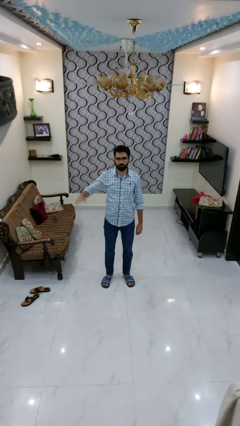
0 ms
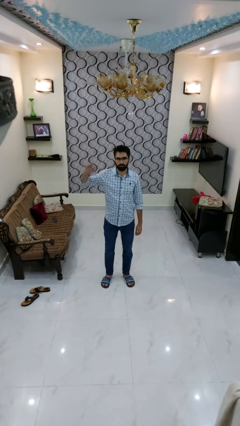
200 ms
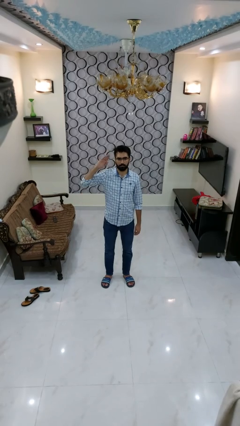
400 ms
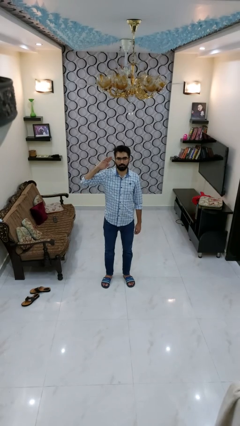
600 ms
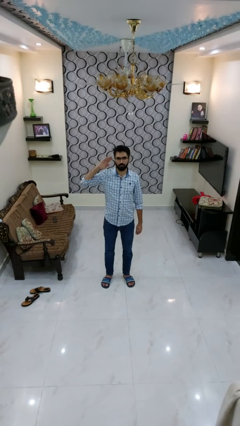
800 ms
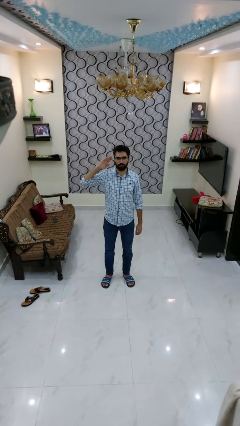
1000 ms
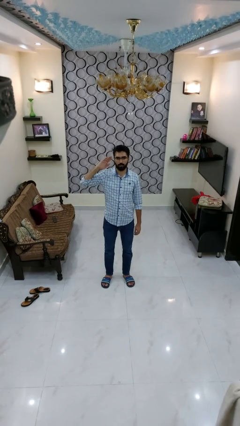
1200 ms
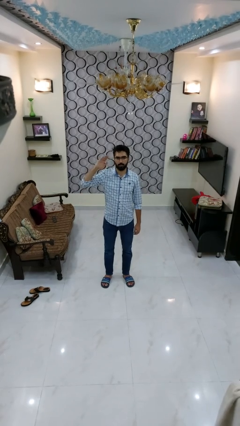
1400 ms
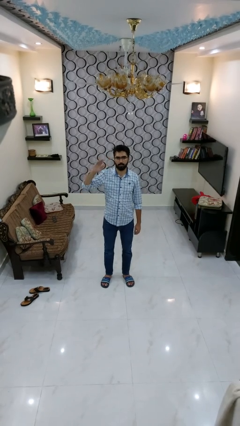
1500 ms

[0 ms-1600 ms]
person salutes

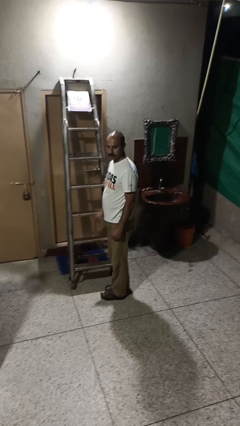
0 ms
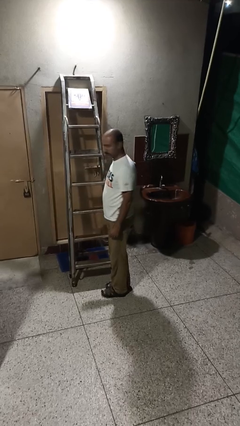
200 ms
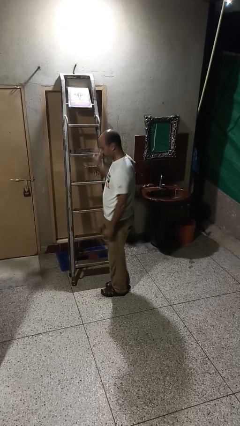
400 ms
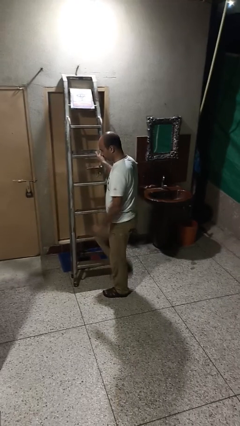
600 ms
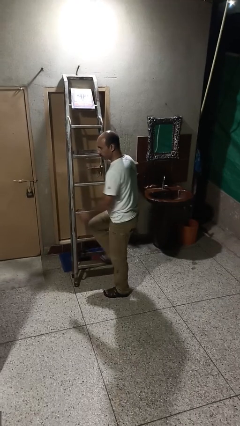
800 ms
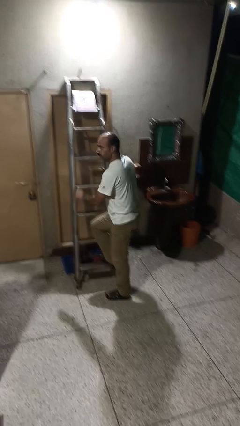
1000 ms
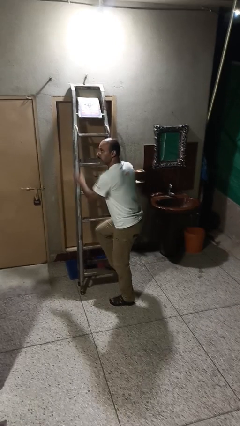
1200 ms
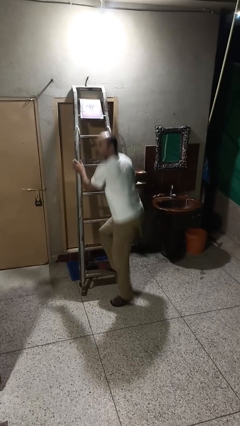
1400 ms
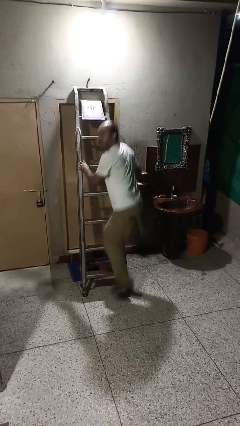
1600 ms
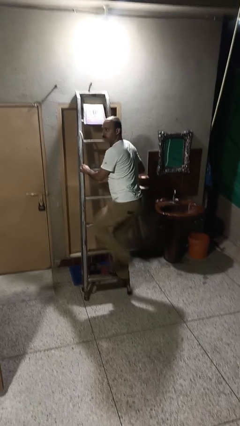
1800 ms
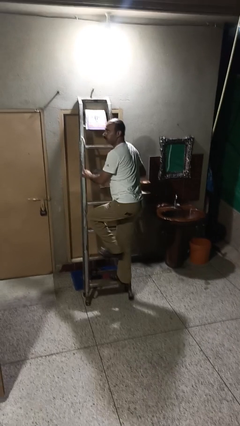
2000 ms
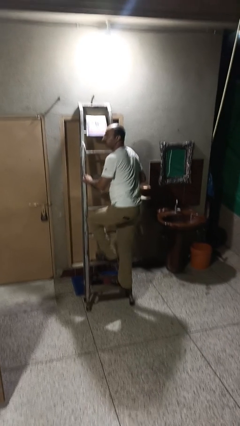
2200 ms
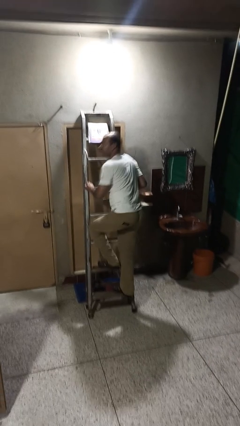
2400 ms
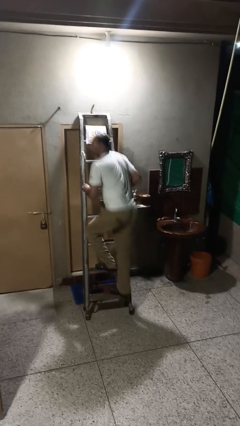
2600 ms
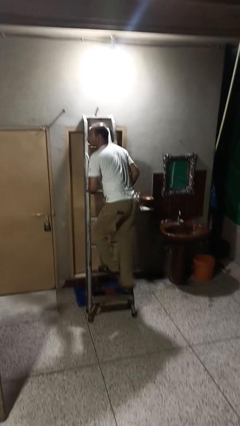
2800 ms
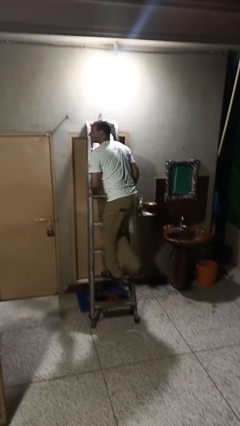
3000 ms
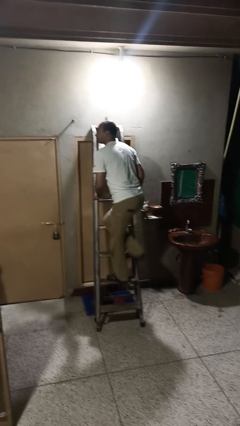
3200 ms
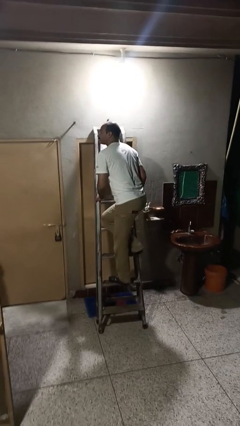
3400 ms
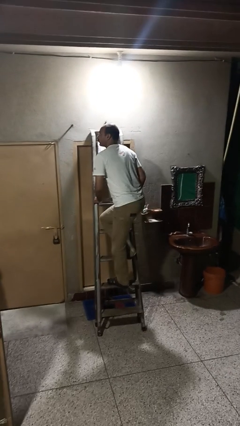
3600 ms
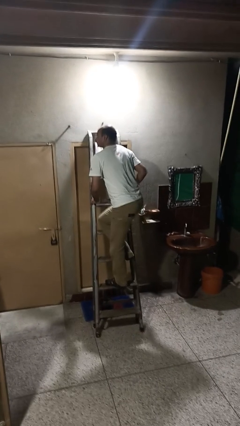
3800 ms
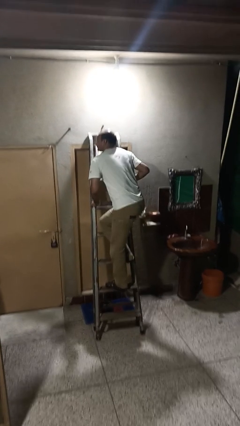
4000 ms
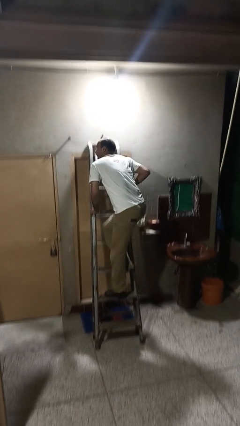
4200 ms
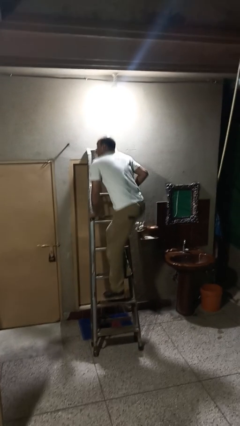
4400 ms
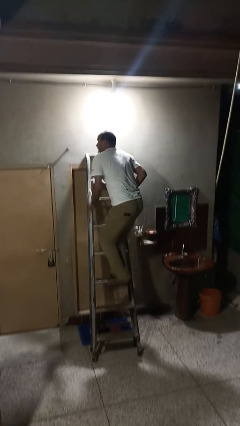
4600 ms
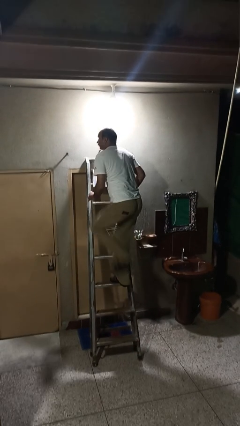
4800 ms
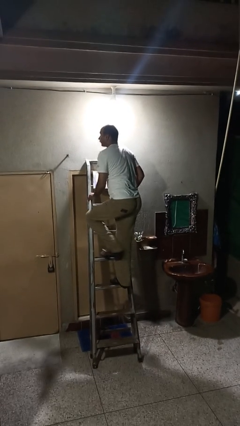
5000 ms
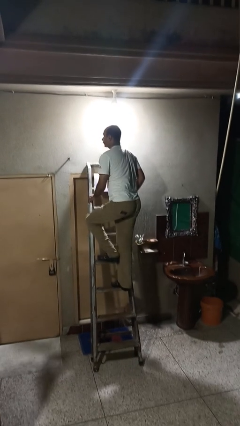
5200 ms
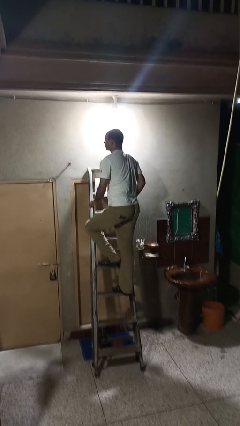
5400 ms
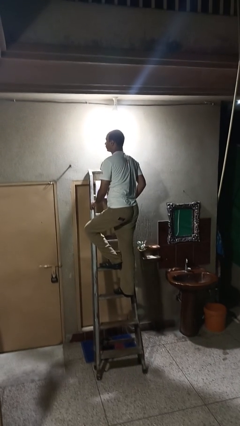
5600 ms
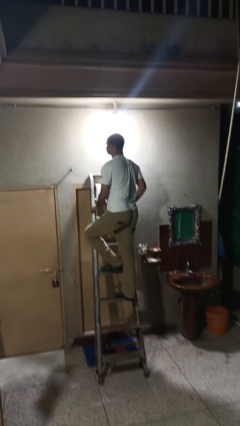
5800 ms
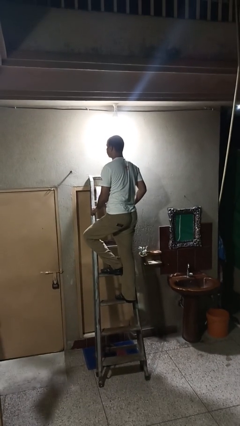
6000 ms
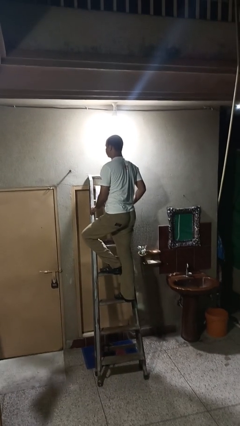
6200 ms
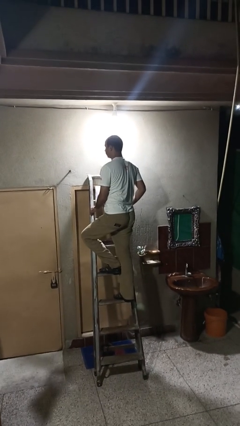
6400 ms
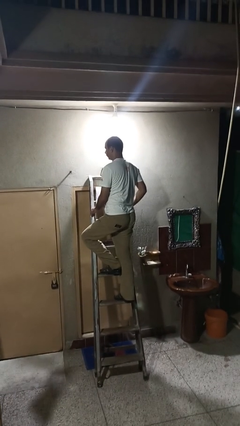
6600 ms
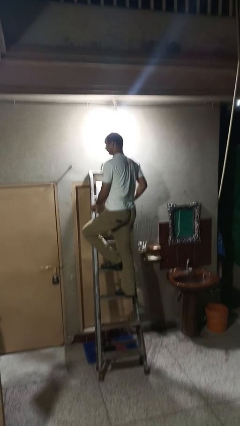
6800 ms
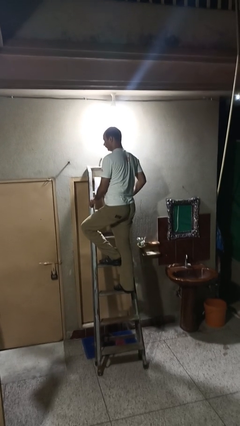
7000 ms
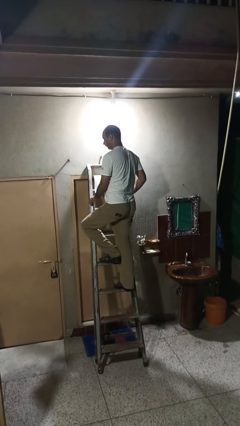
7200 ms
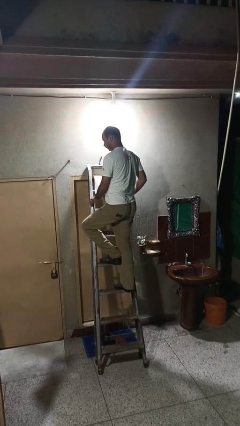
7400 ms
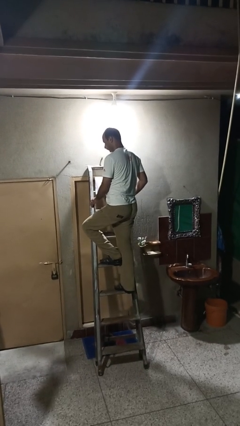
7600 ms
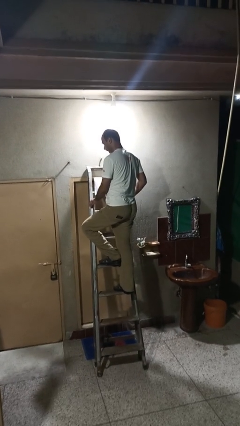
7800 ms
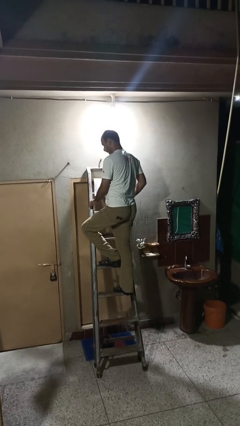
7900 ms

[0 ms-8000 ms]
person climbs up ladder

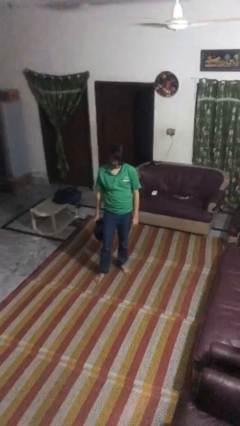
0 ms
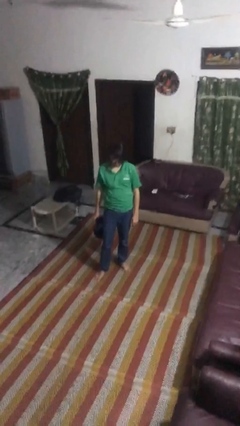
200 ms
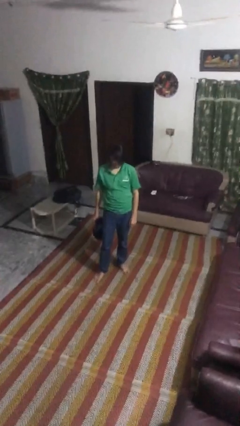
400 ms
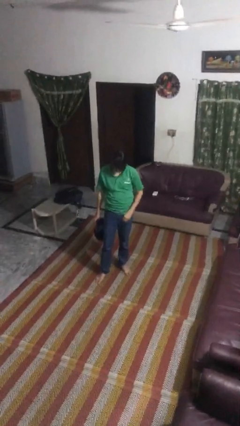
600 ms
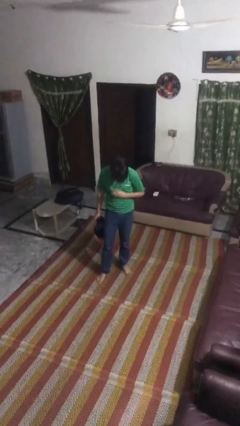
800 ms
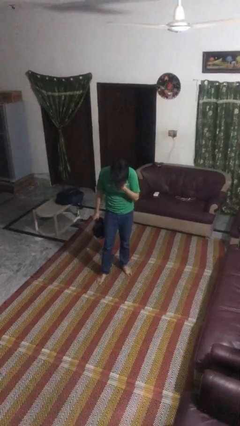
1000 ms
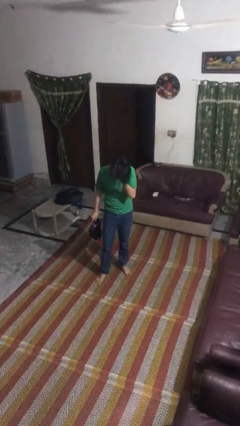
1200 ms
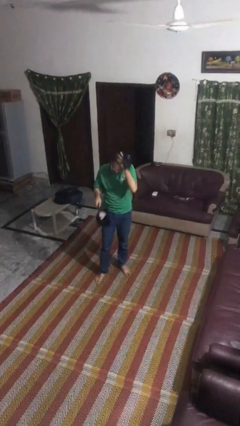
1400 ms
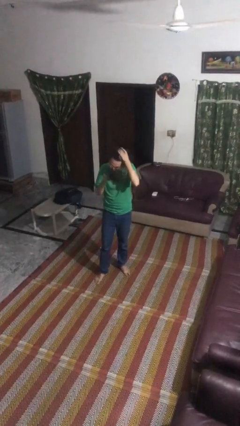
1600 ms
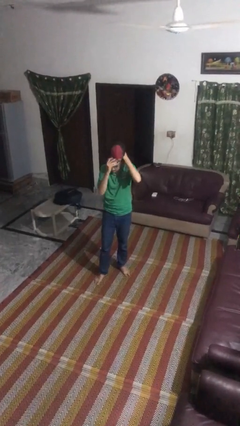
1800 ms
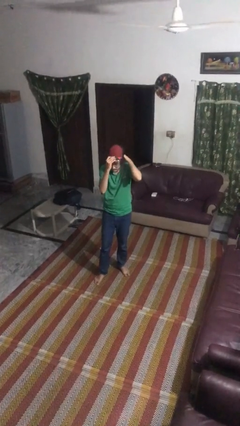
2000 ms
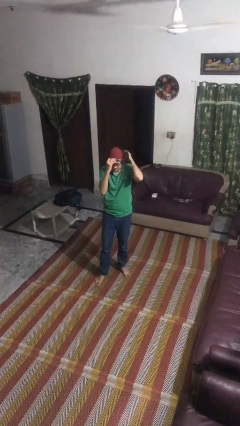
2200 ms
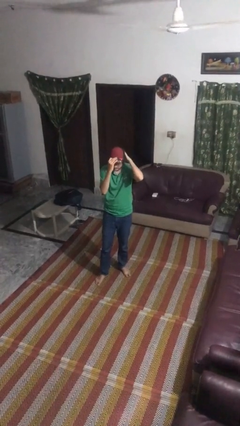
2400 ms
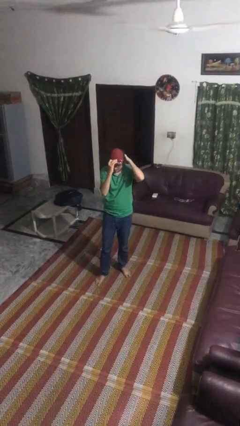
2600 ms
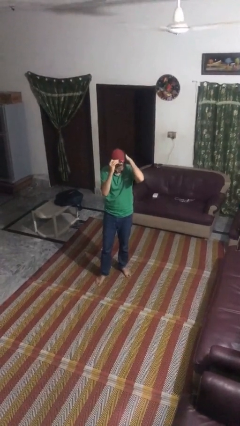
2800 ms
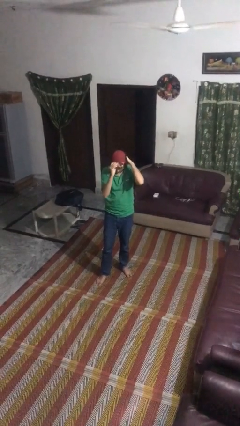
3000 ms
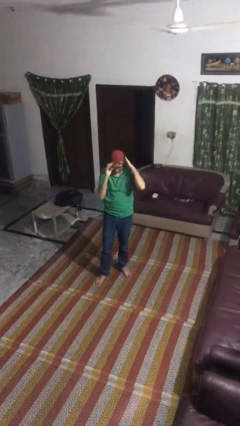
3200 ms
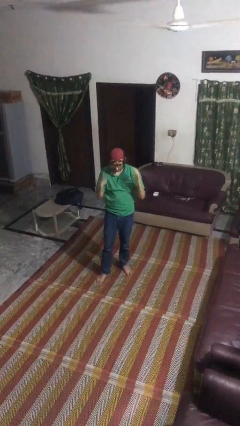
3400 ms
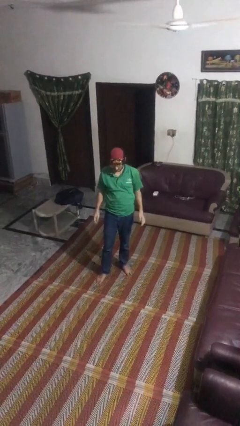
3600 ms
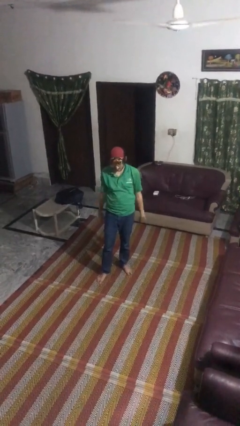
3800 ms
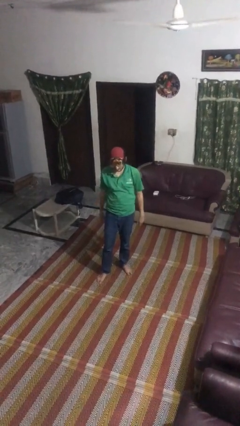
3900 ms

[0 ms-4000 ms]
person puts on hat

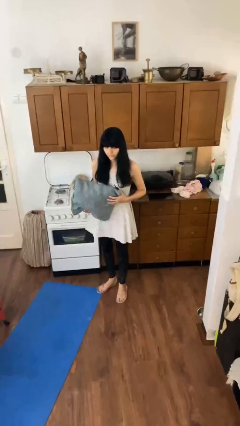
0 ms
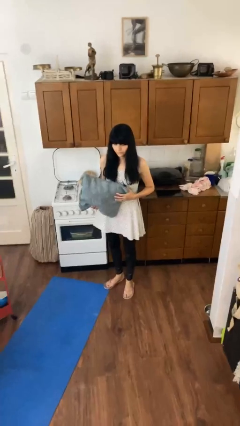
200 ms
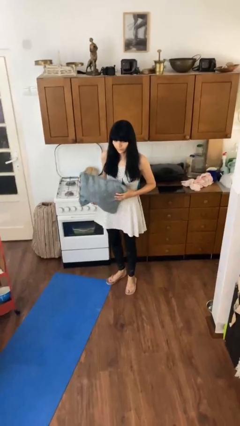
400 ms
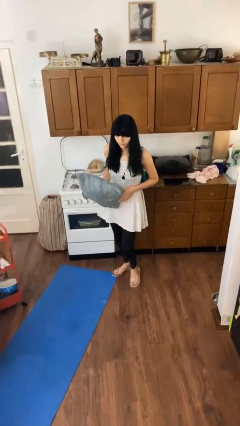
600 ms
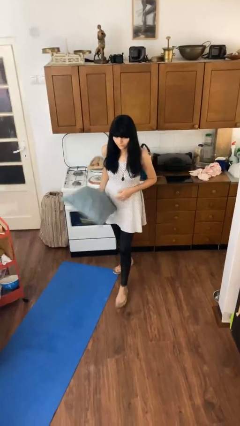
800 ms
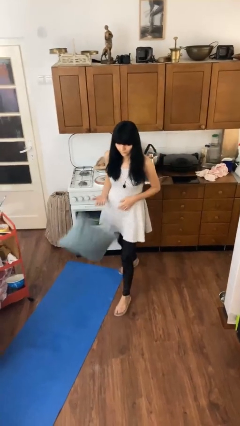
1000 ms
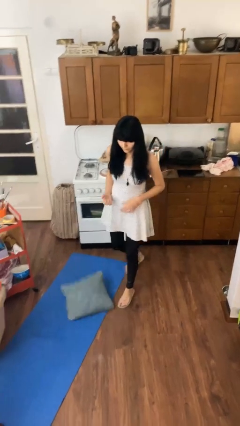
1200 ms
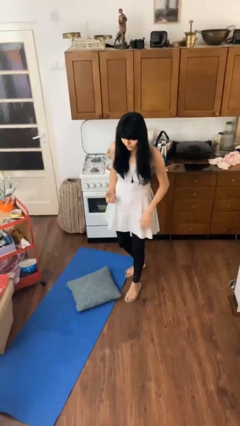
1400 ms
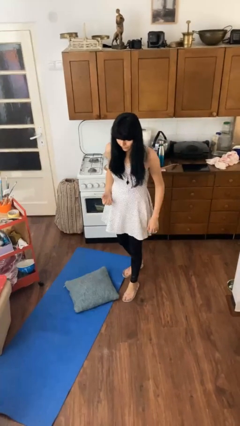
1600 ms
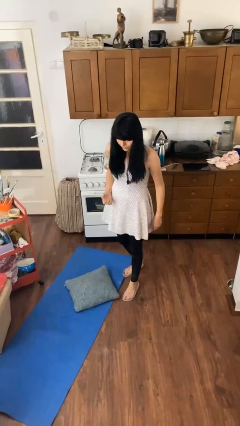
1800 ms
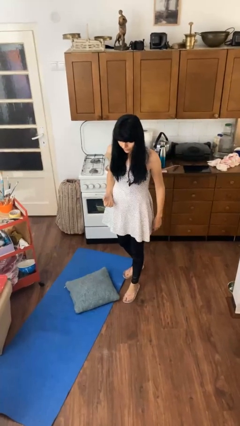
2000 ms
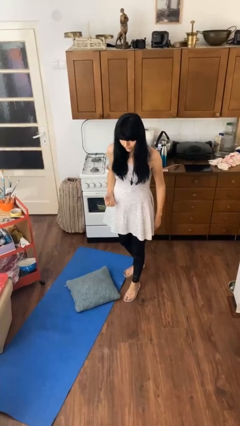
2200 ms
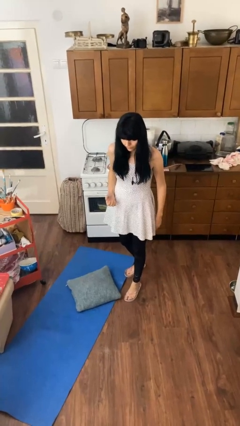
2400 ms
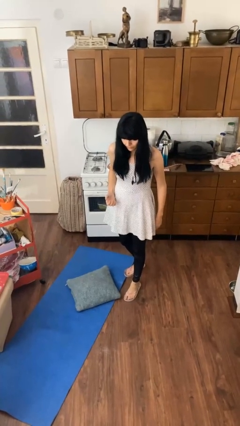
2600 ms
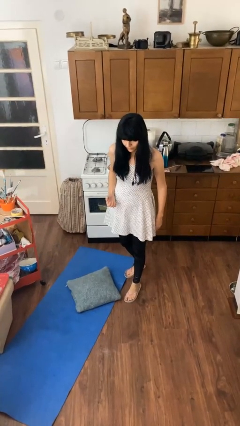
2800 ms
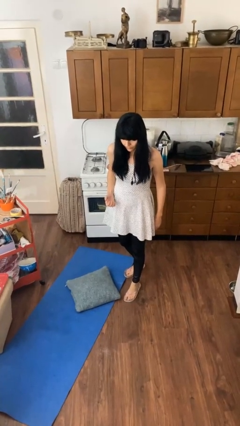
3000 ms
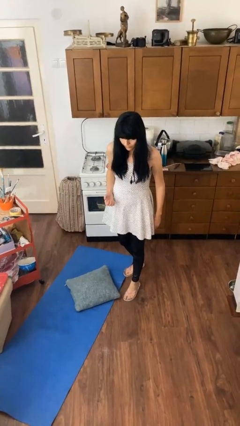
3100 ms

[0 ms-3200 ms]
person drops object

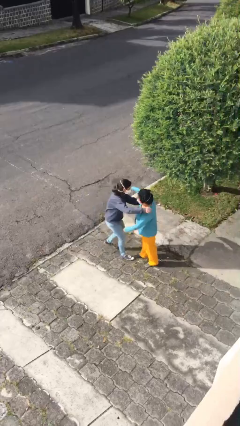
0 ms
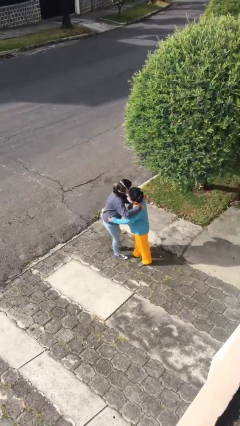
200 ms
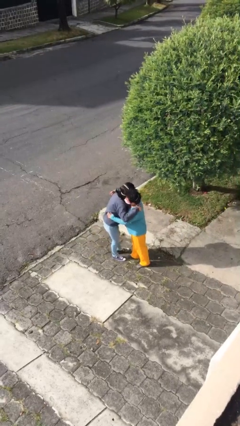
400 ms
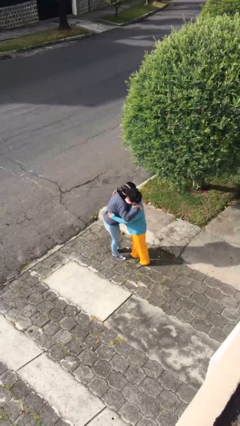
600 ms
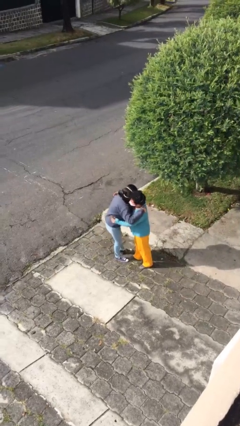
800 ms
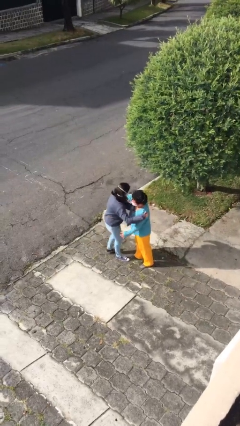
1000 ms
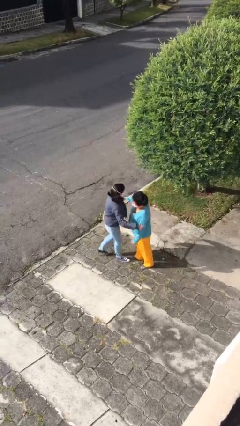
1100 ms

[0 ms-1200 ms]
person embraces person
